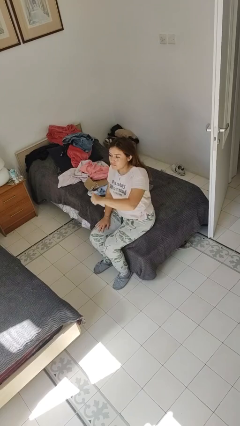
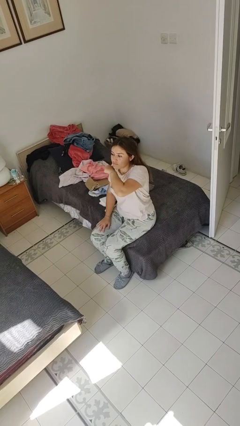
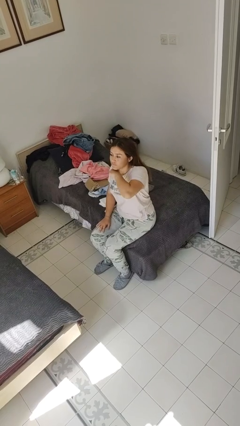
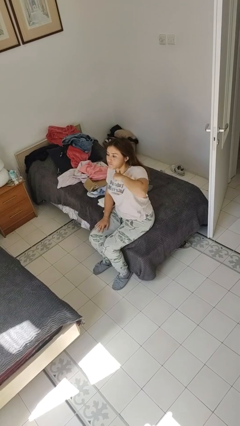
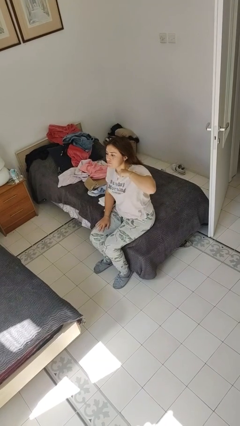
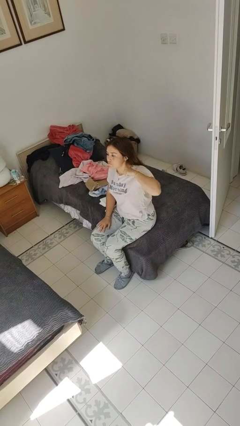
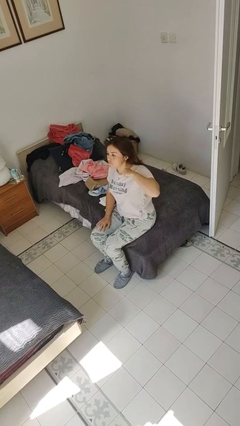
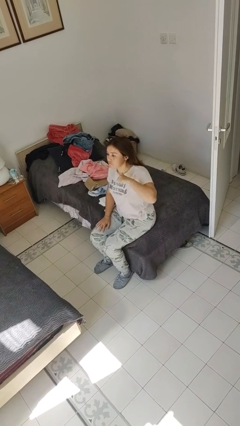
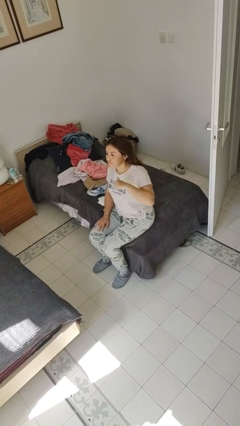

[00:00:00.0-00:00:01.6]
person gestures cut

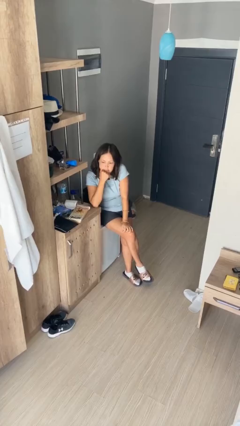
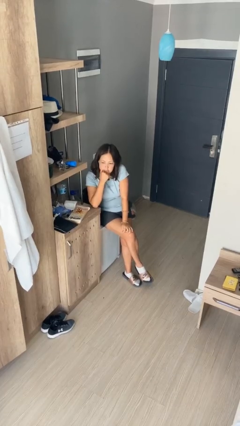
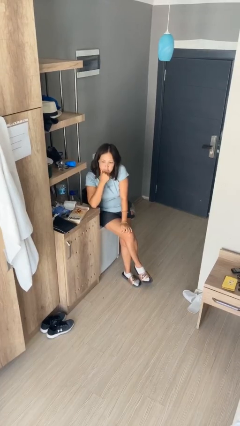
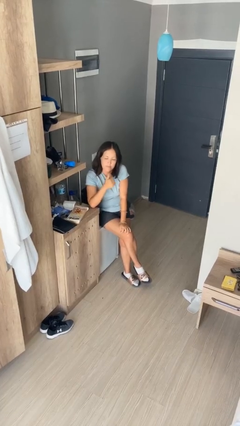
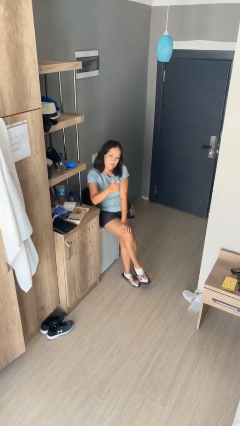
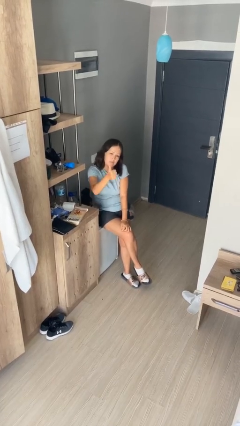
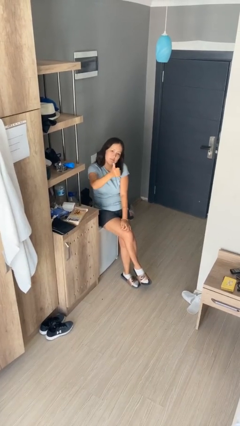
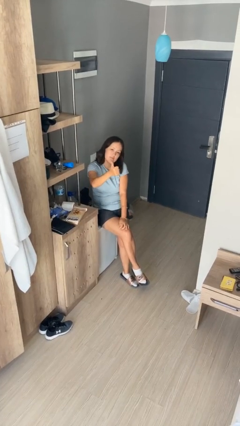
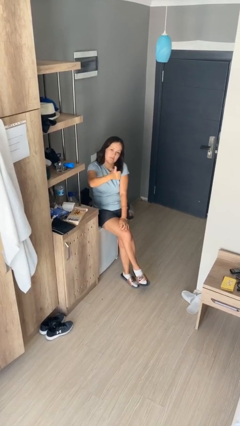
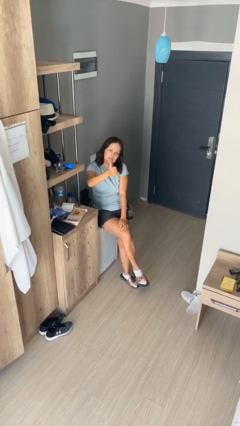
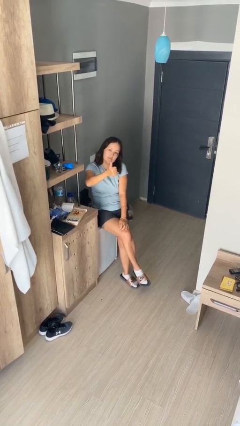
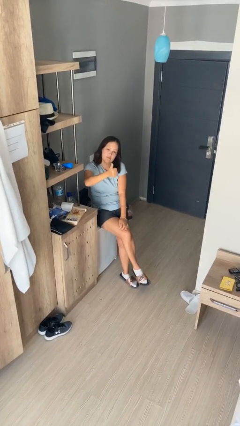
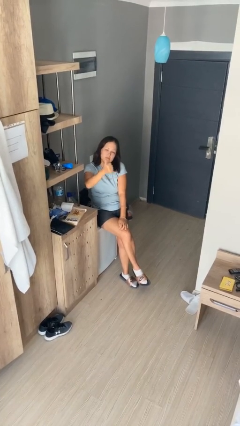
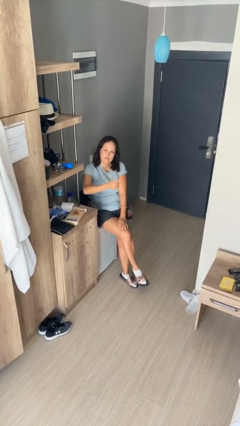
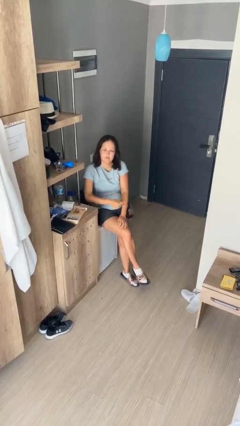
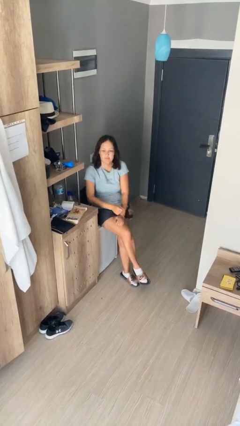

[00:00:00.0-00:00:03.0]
person gestures thumbs up

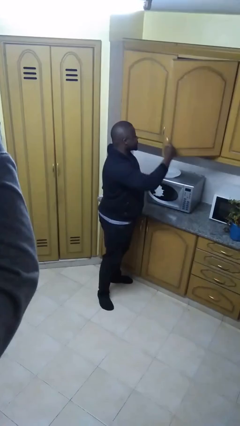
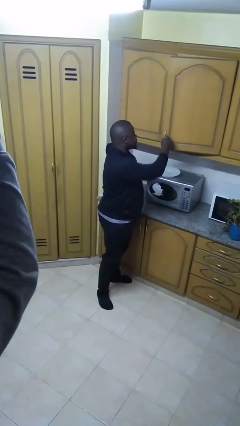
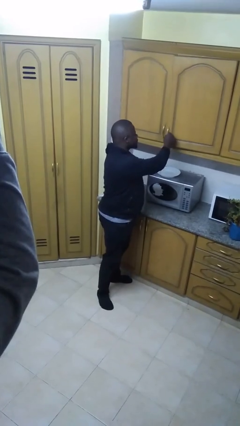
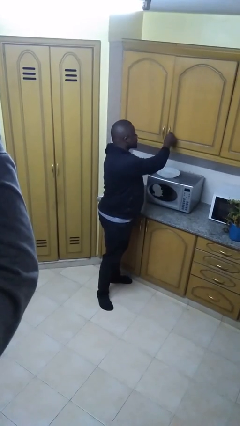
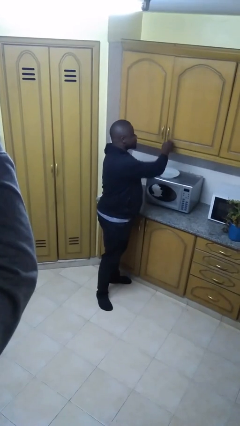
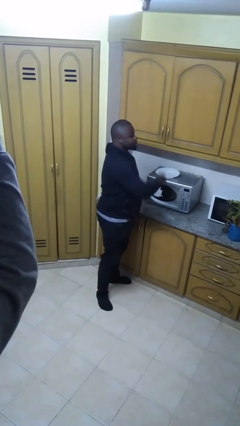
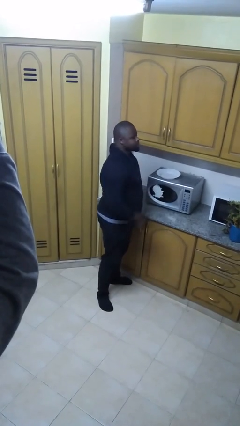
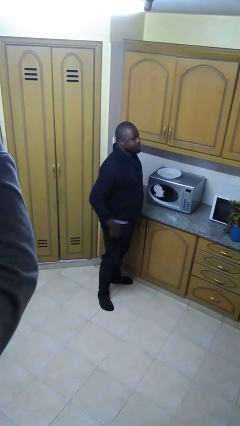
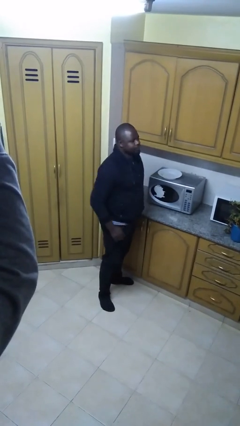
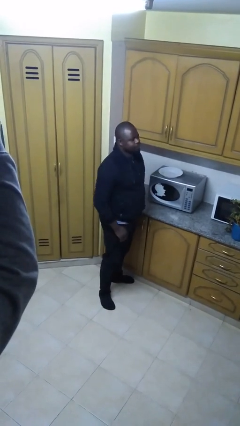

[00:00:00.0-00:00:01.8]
person closes cabinet

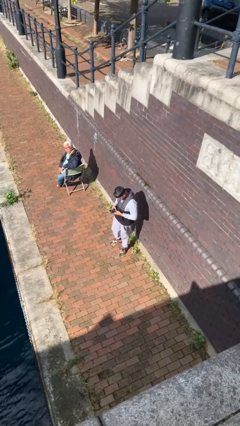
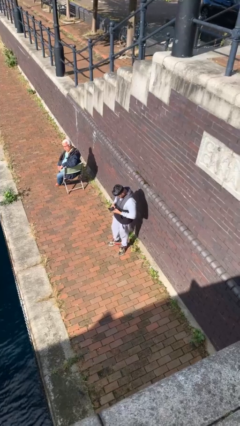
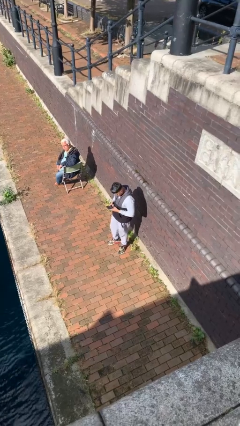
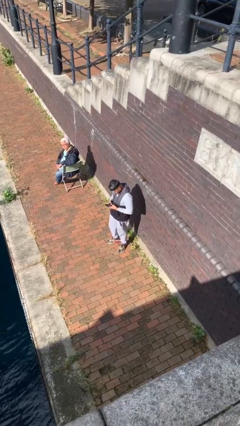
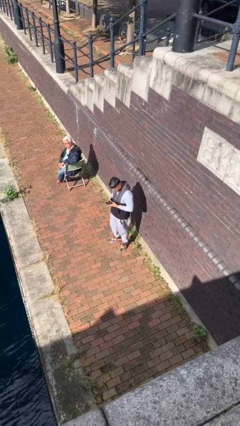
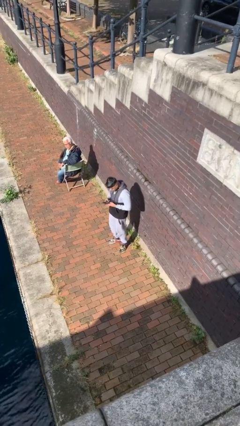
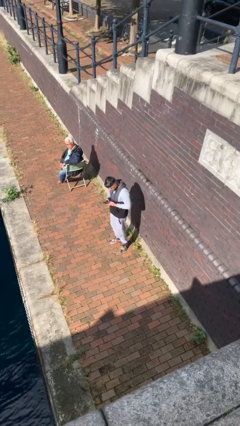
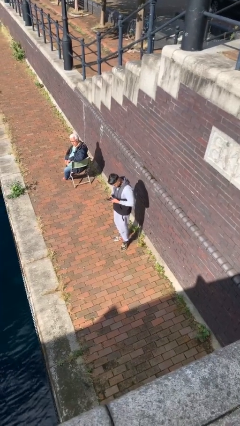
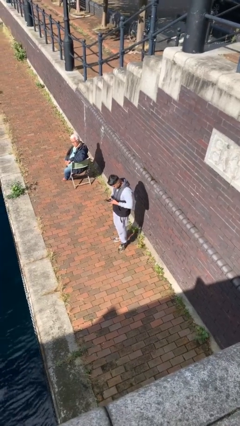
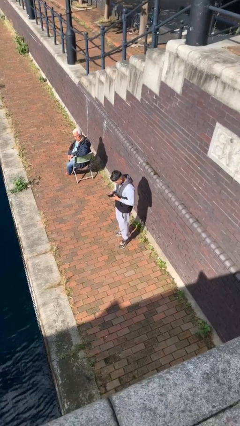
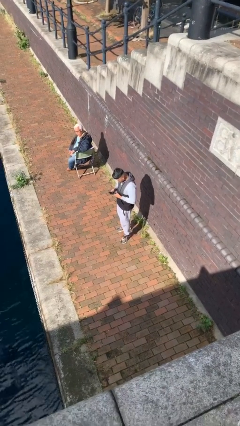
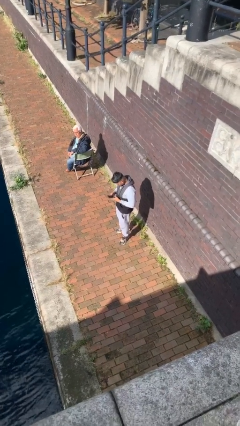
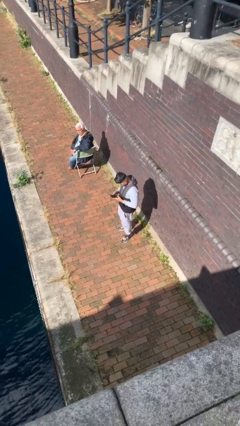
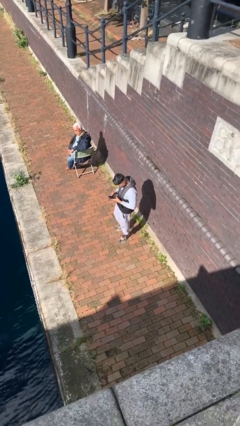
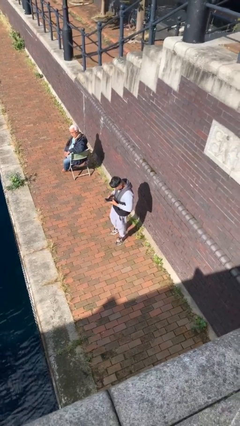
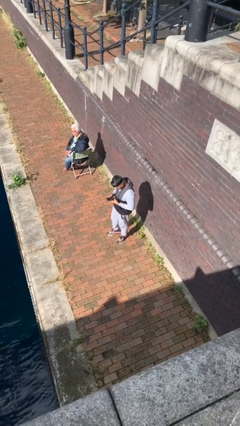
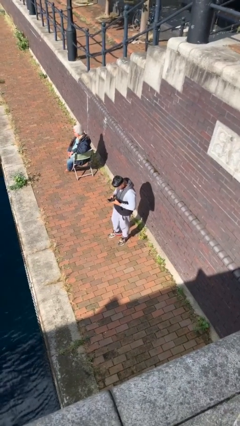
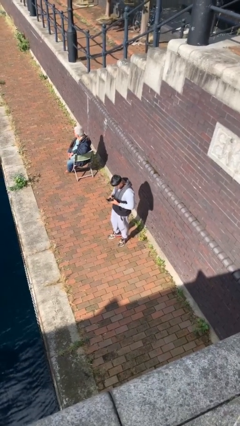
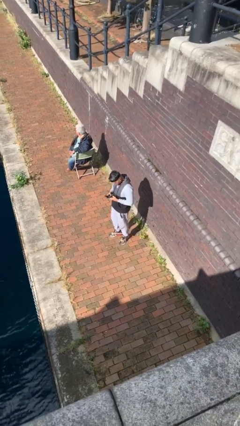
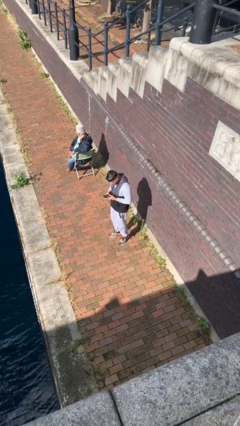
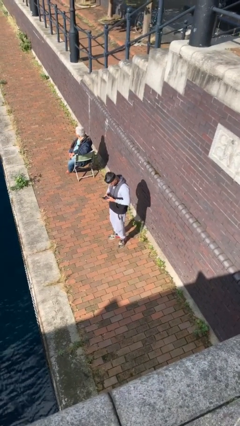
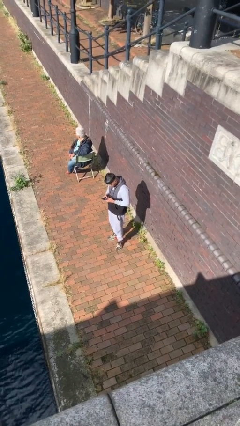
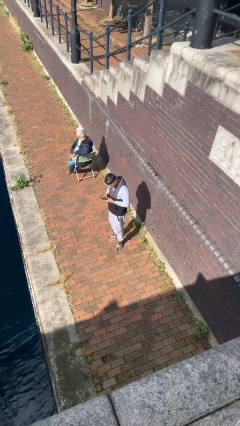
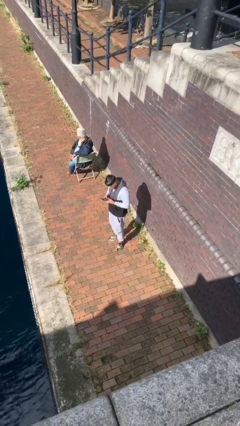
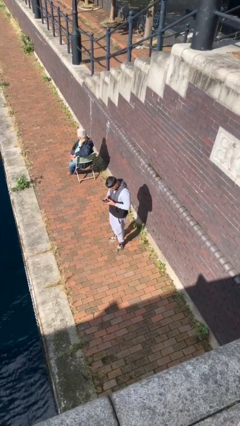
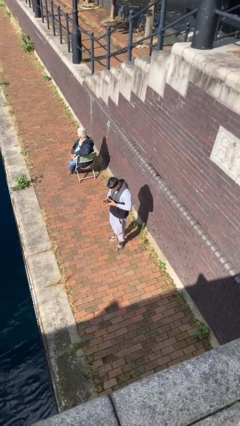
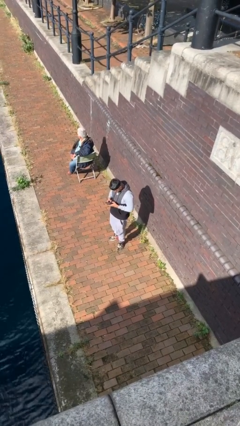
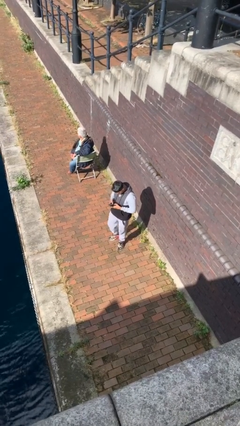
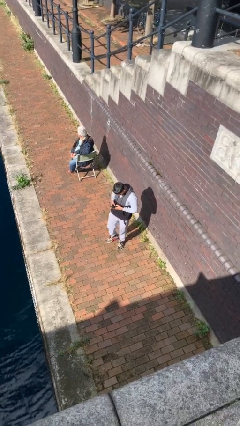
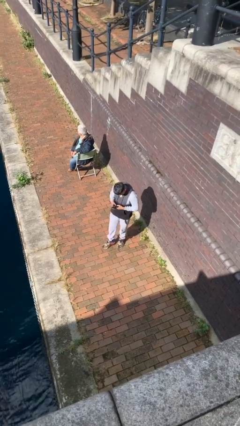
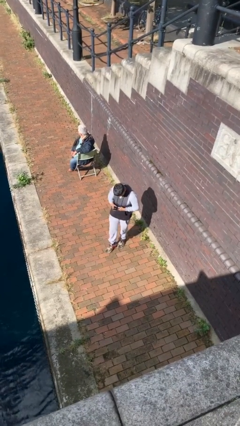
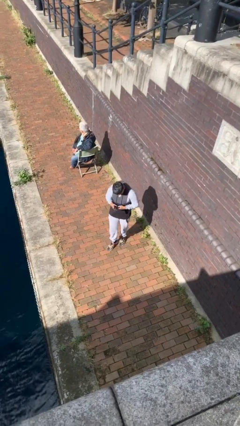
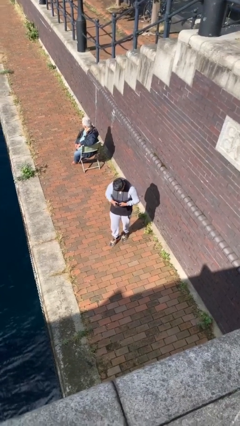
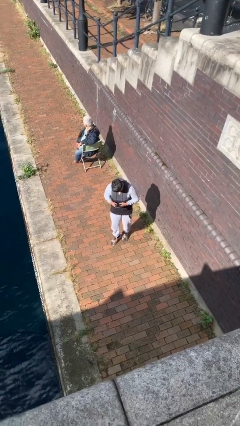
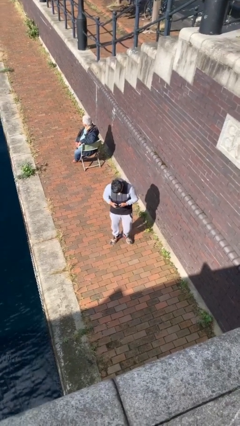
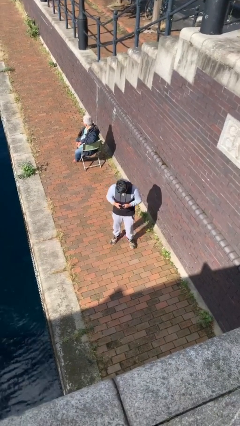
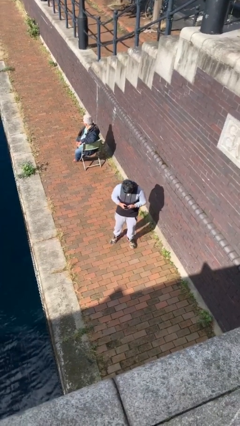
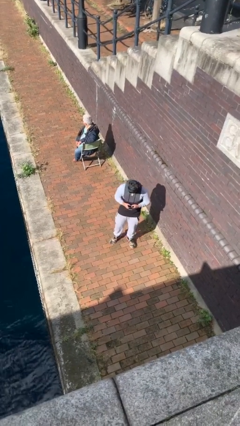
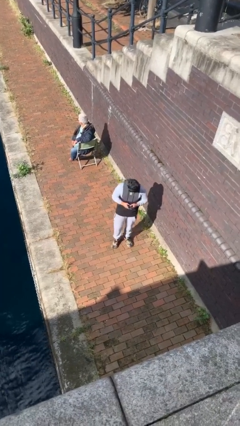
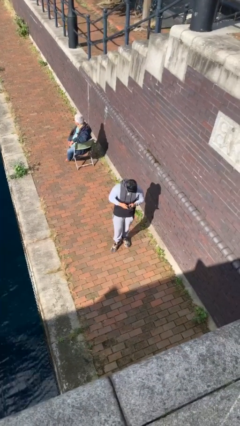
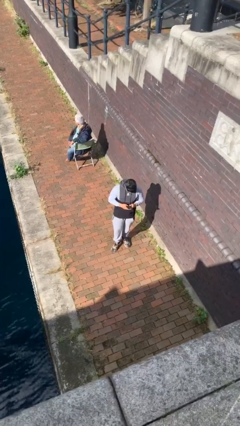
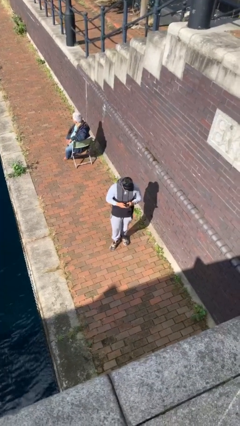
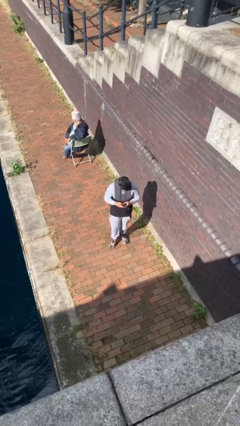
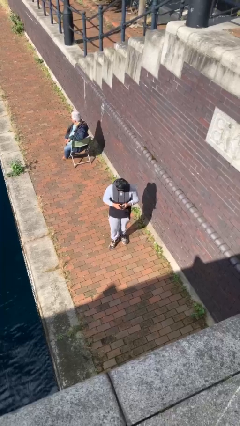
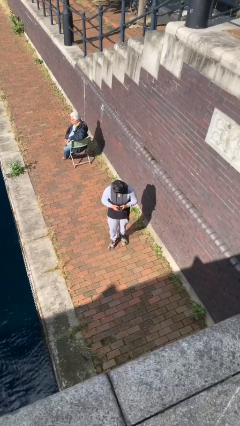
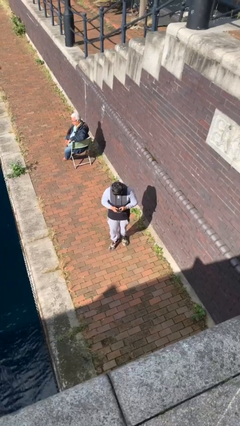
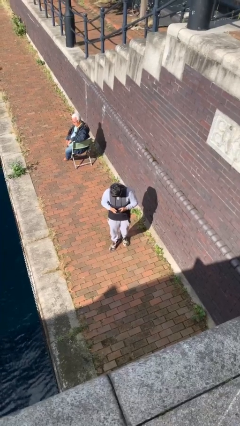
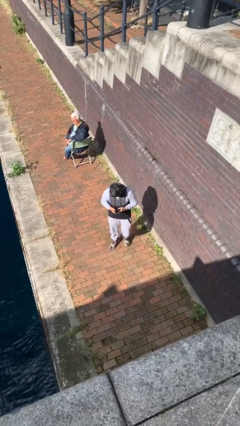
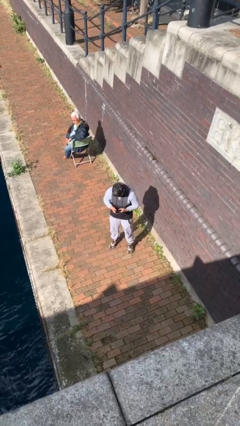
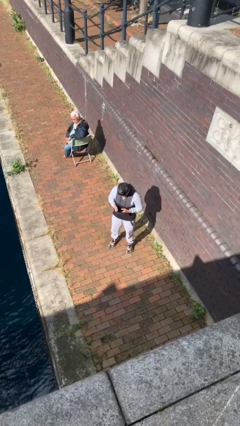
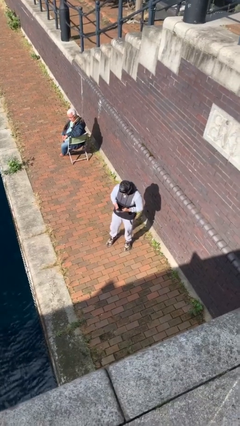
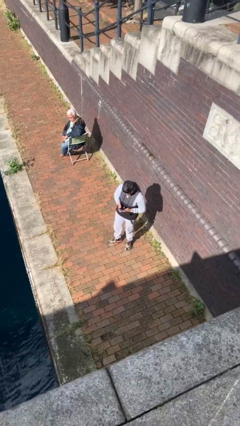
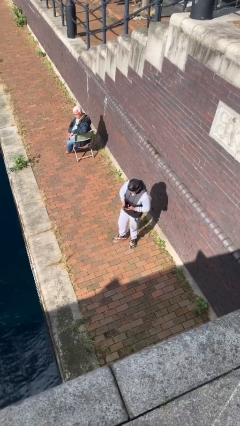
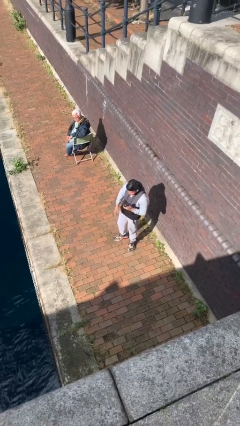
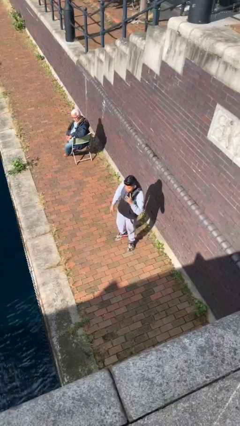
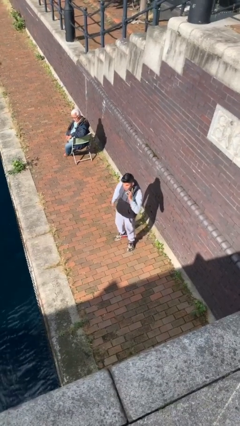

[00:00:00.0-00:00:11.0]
person texts on phone

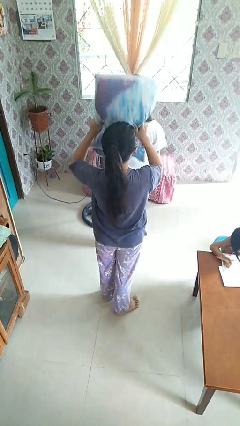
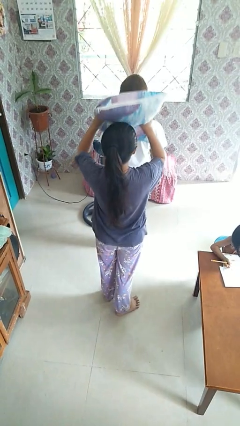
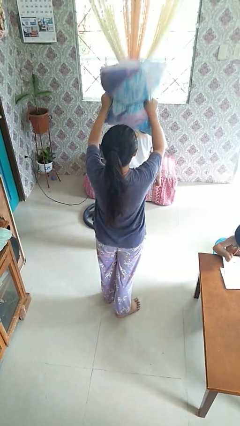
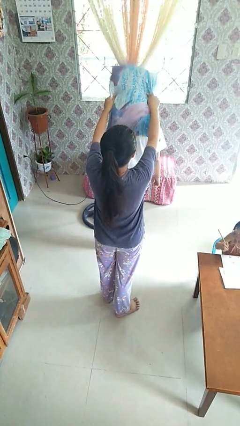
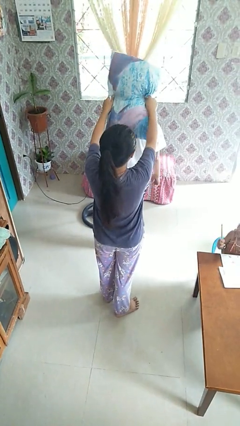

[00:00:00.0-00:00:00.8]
person hits person with pillow
